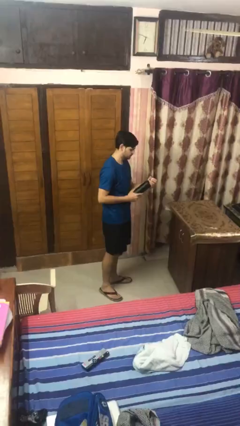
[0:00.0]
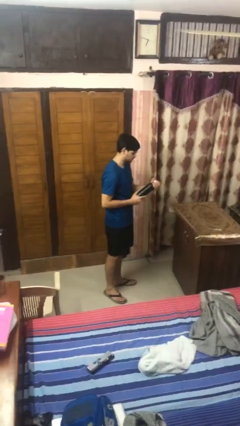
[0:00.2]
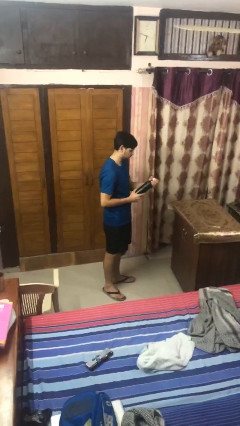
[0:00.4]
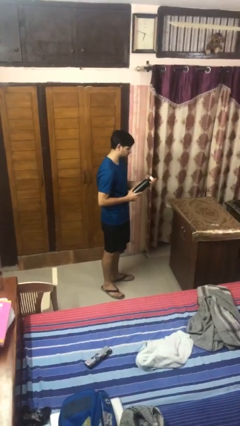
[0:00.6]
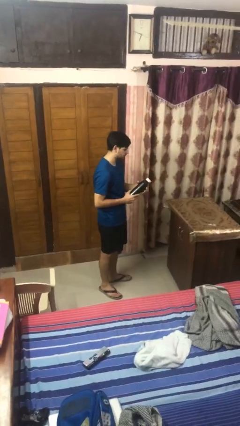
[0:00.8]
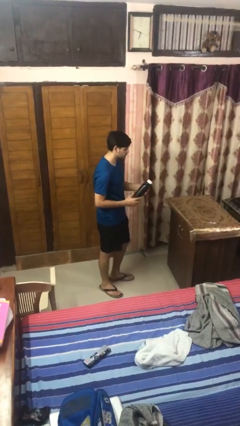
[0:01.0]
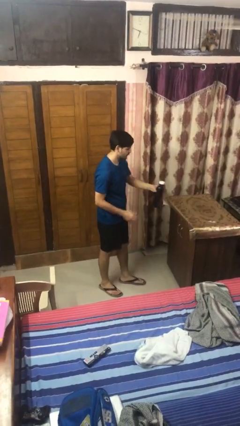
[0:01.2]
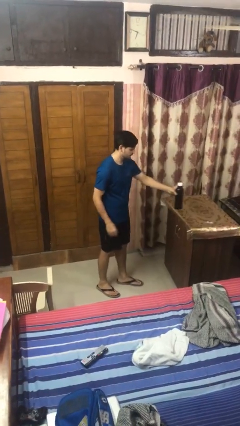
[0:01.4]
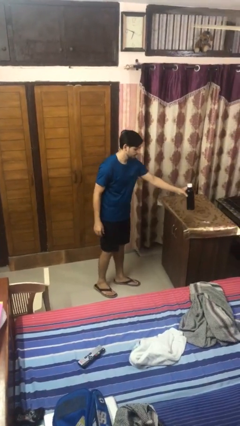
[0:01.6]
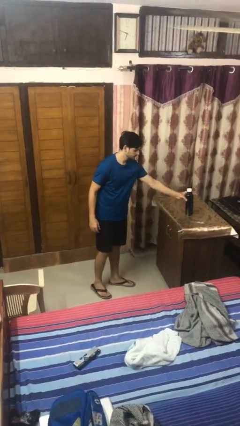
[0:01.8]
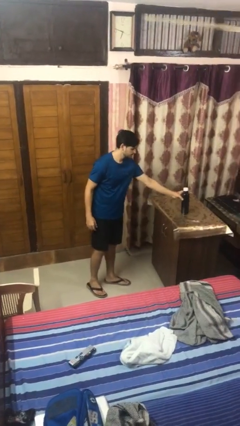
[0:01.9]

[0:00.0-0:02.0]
person puts down object on countertop

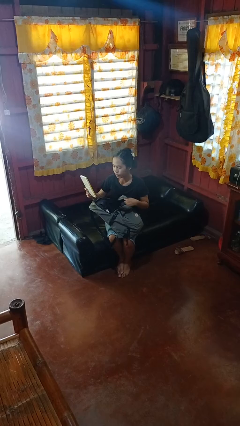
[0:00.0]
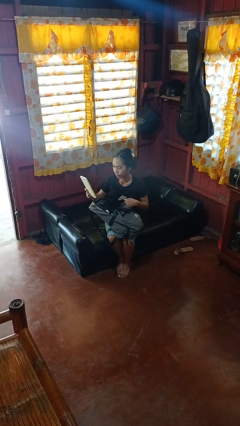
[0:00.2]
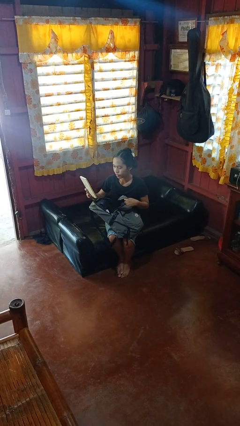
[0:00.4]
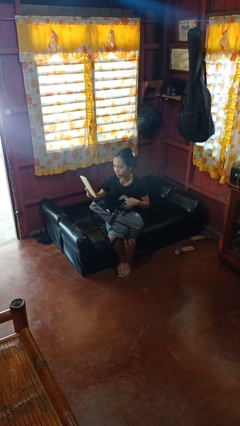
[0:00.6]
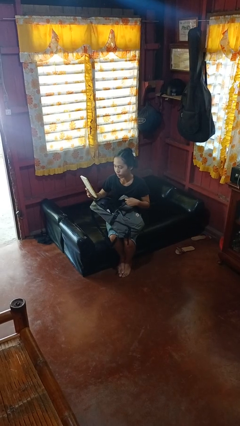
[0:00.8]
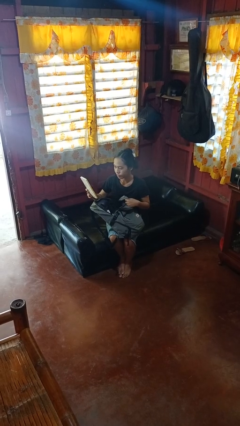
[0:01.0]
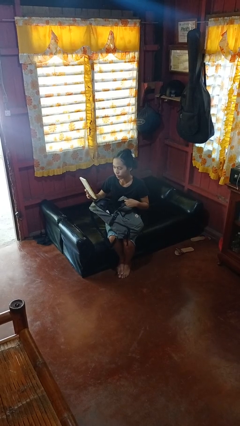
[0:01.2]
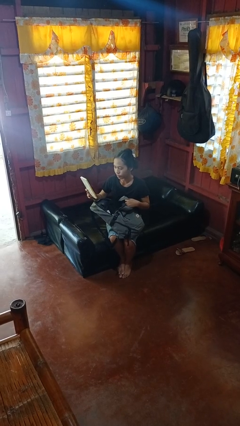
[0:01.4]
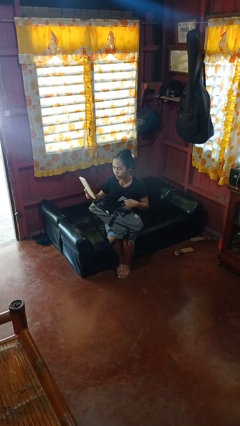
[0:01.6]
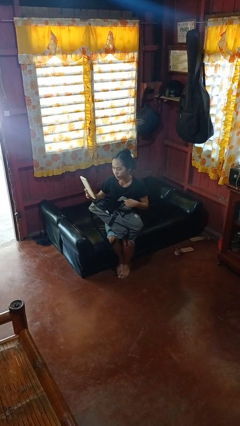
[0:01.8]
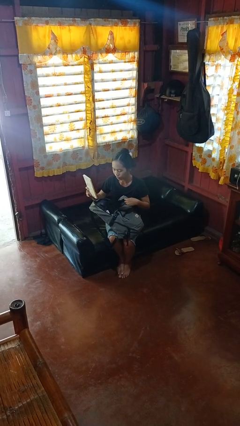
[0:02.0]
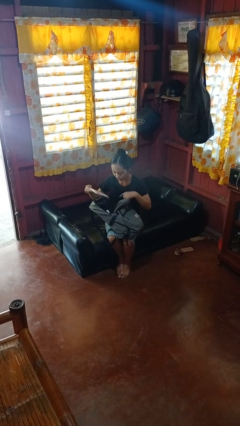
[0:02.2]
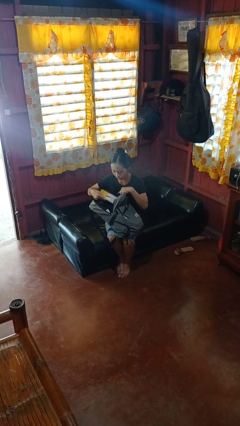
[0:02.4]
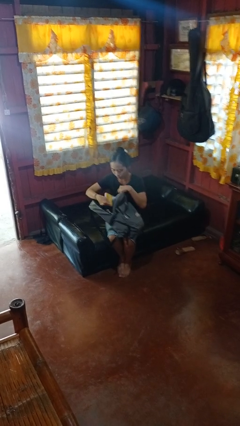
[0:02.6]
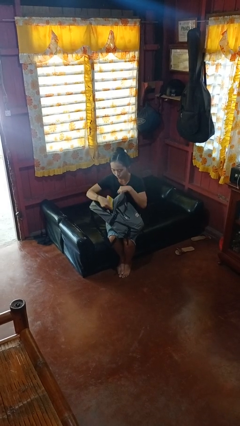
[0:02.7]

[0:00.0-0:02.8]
person takes object from backpack

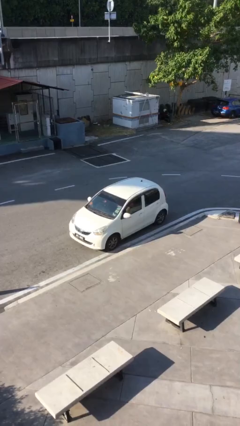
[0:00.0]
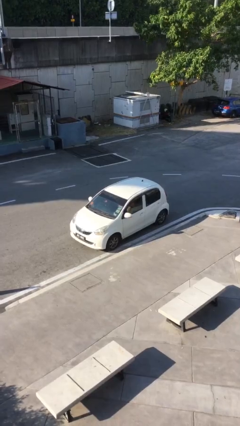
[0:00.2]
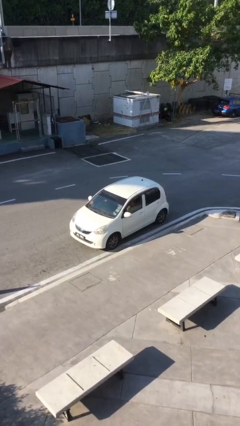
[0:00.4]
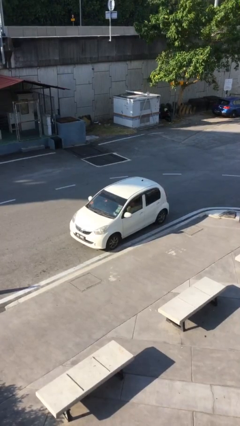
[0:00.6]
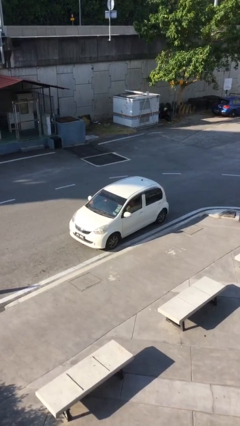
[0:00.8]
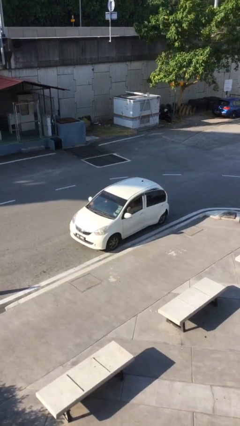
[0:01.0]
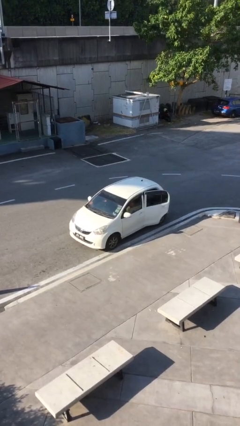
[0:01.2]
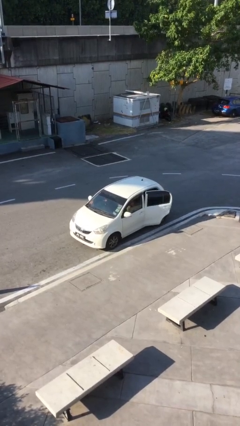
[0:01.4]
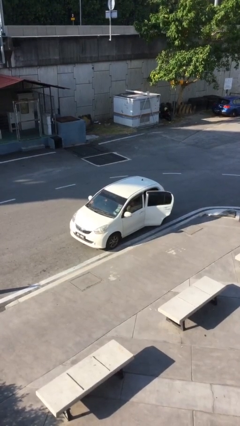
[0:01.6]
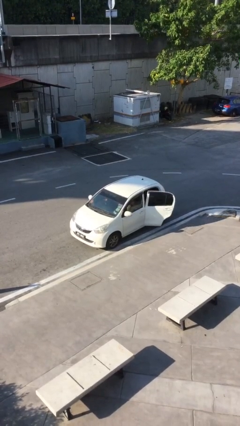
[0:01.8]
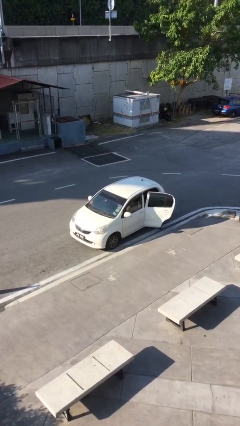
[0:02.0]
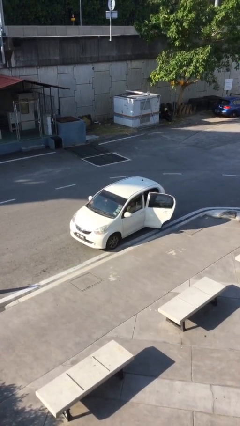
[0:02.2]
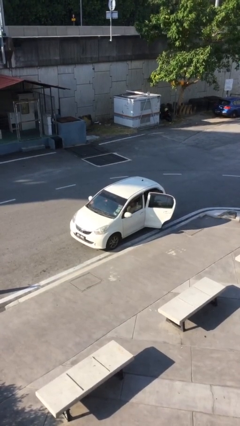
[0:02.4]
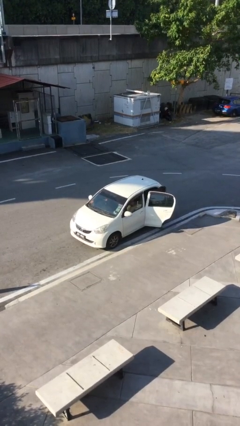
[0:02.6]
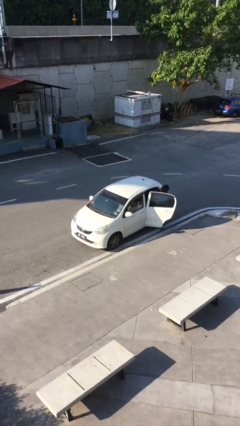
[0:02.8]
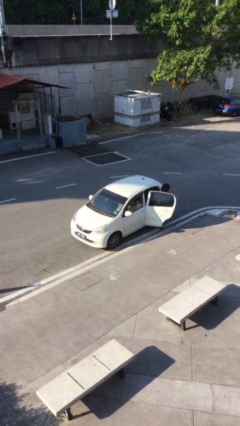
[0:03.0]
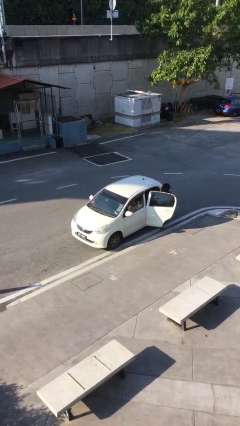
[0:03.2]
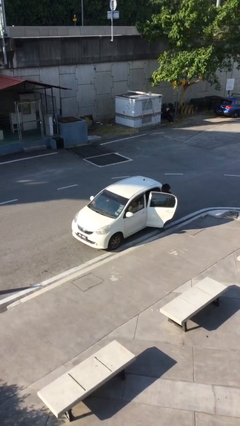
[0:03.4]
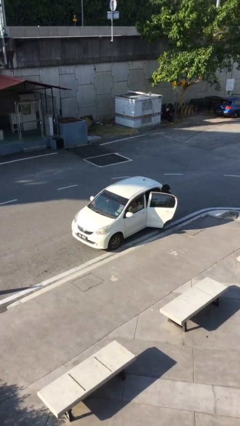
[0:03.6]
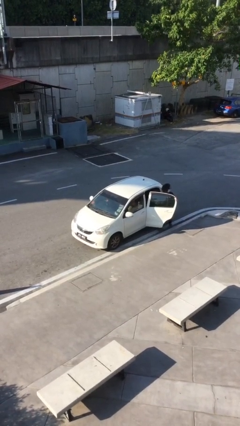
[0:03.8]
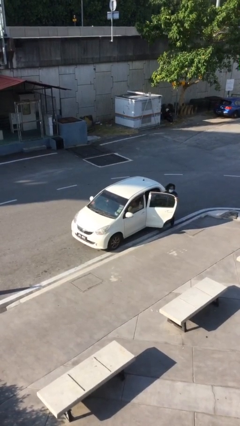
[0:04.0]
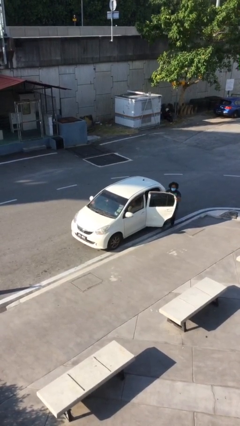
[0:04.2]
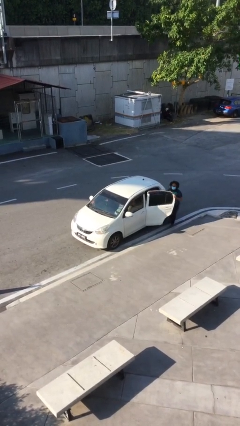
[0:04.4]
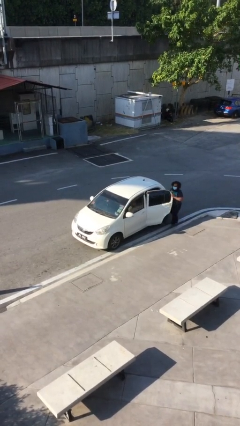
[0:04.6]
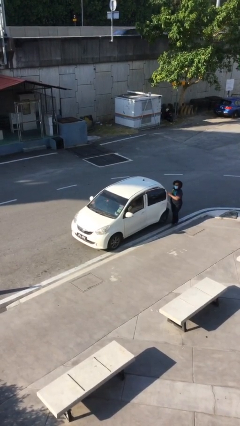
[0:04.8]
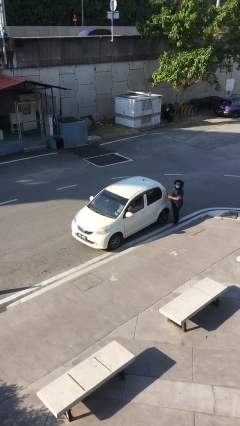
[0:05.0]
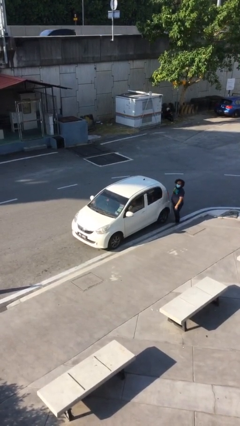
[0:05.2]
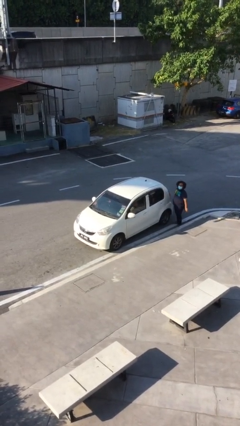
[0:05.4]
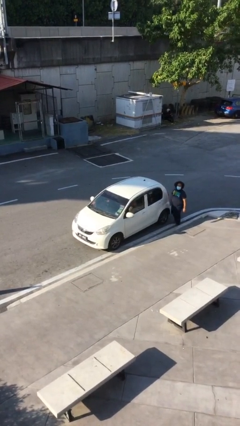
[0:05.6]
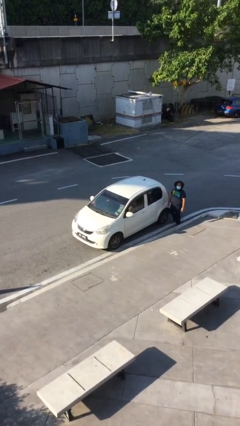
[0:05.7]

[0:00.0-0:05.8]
car drops off person

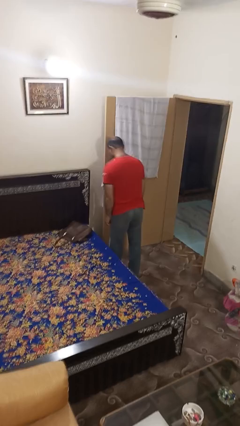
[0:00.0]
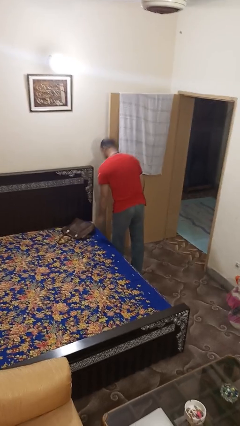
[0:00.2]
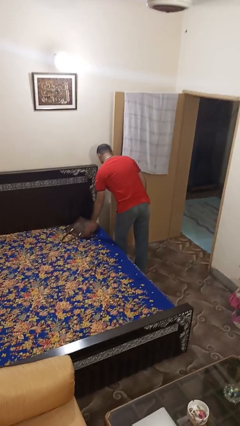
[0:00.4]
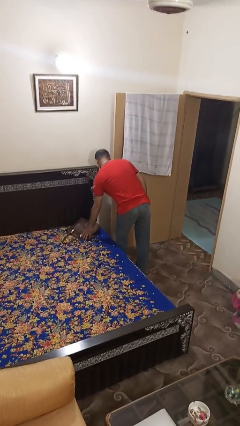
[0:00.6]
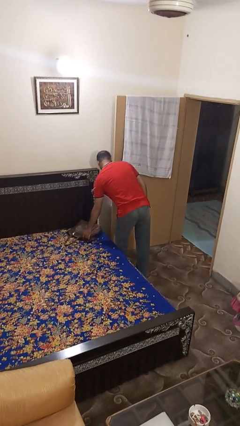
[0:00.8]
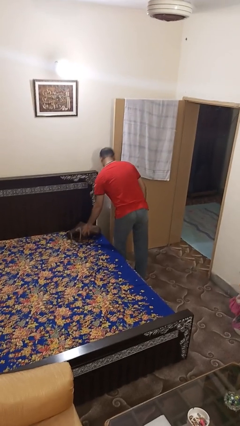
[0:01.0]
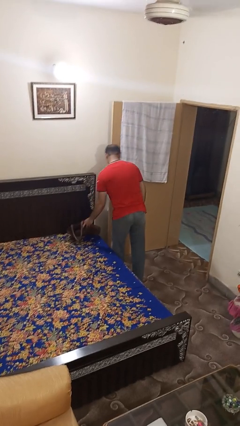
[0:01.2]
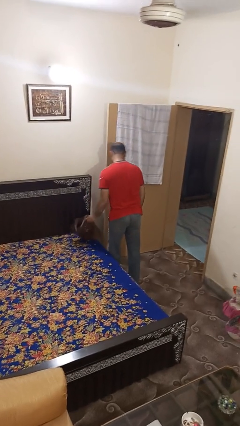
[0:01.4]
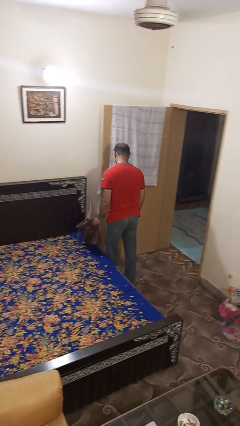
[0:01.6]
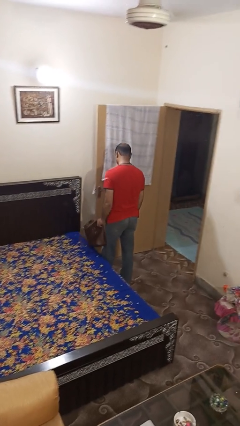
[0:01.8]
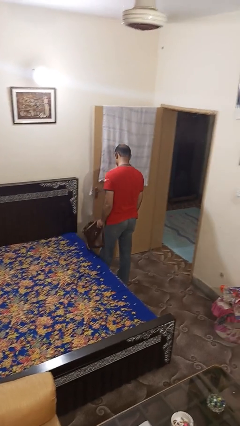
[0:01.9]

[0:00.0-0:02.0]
person picks up object from bed

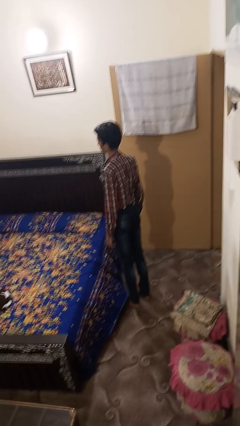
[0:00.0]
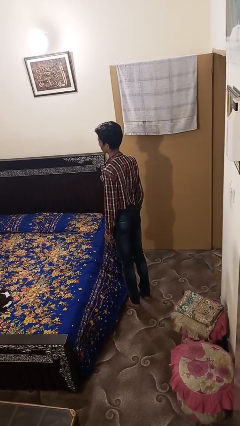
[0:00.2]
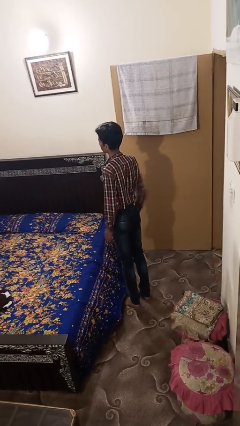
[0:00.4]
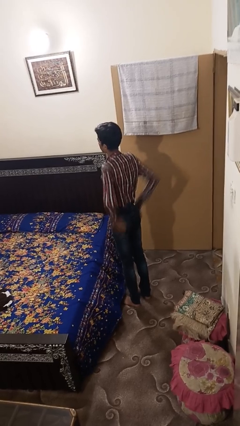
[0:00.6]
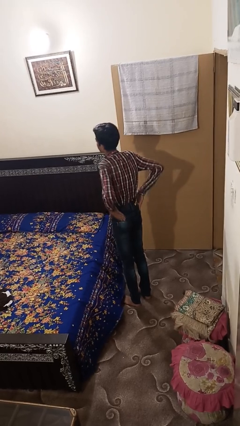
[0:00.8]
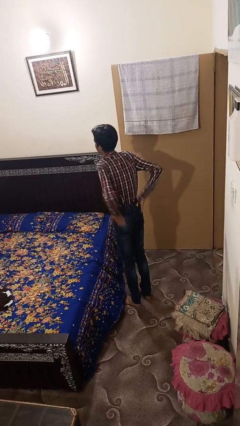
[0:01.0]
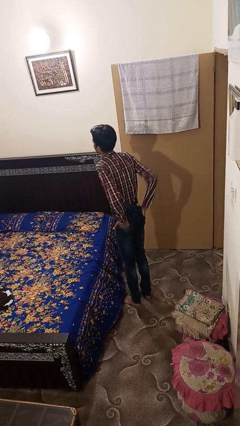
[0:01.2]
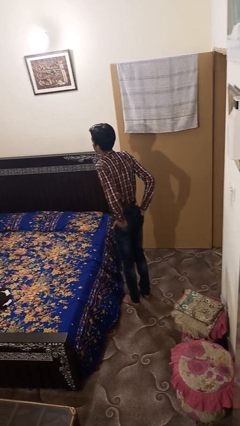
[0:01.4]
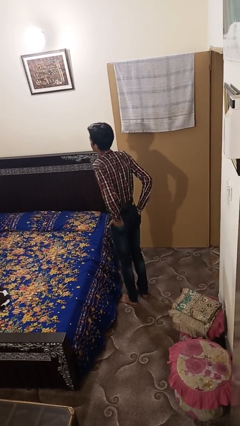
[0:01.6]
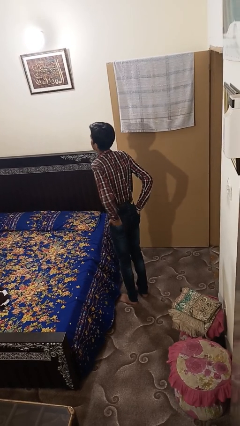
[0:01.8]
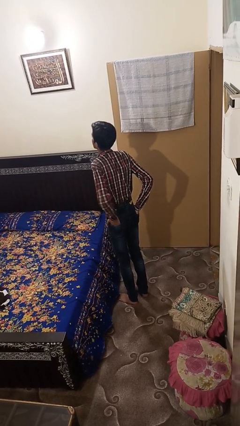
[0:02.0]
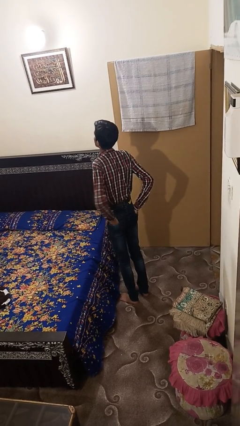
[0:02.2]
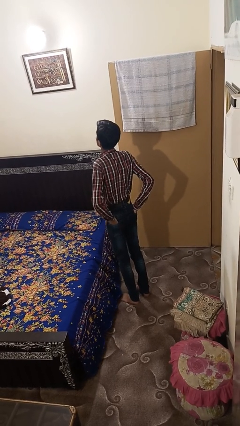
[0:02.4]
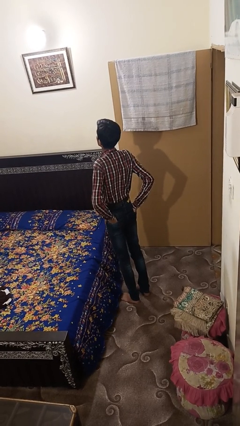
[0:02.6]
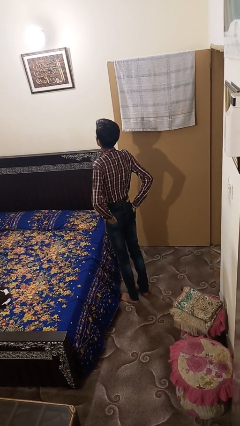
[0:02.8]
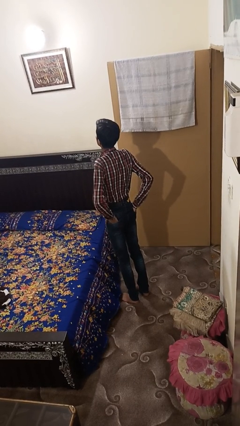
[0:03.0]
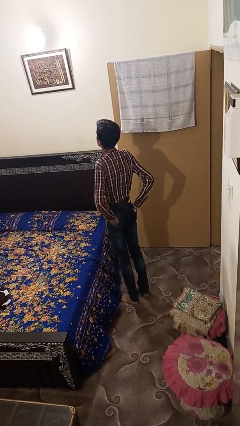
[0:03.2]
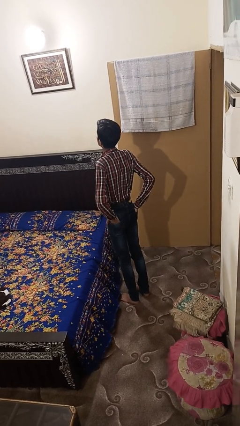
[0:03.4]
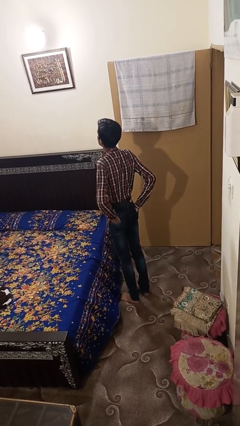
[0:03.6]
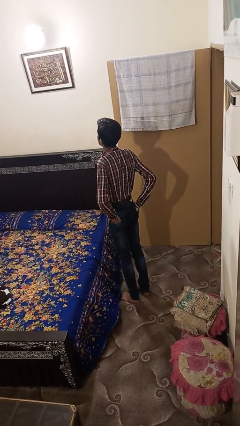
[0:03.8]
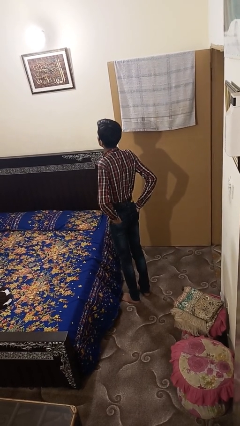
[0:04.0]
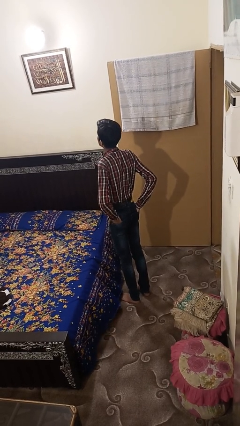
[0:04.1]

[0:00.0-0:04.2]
person puts hands in back pockets

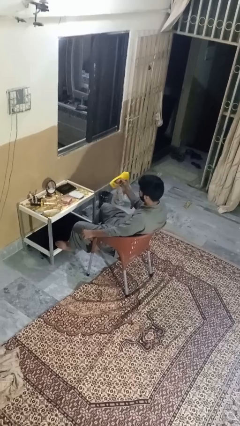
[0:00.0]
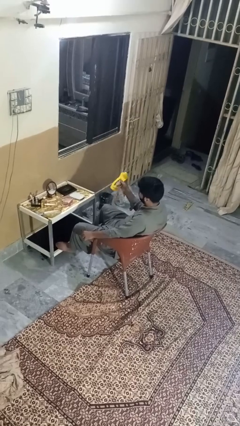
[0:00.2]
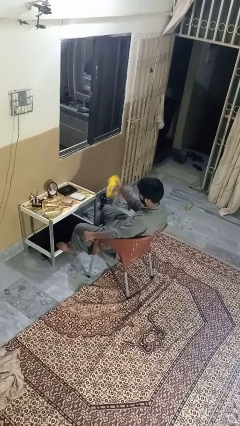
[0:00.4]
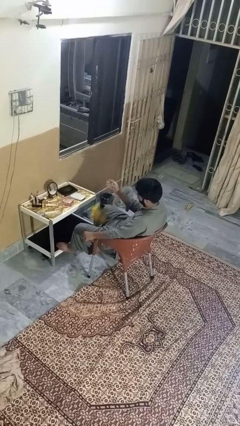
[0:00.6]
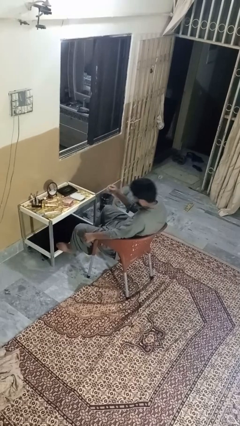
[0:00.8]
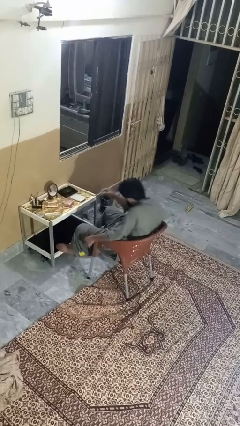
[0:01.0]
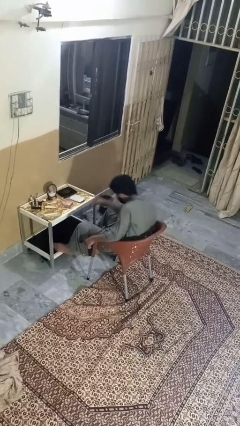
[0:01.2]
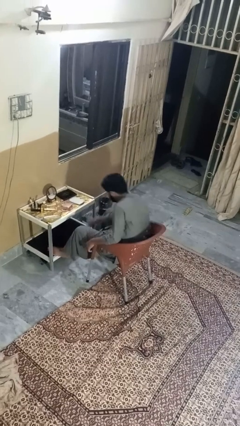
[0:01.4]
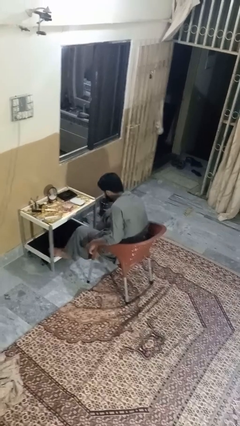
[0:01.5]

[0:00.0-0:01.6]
person throws object to ground
